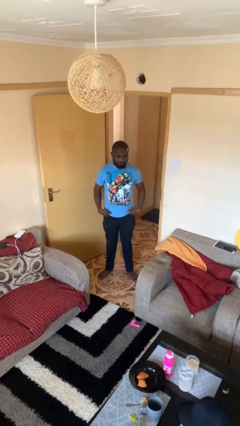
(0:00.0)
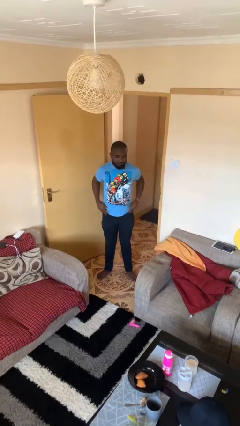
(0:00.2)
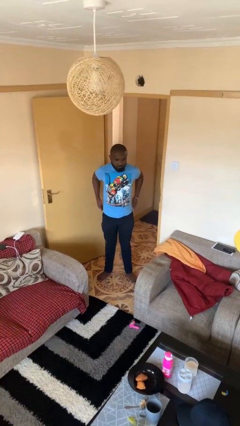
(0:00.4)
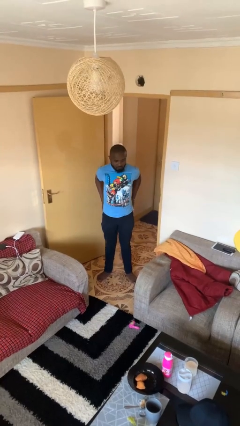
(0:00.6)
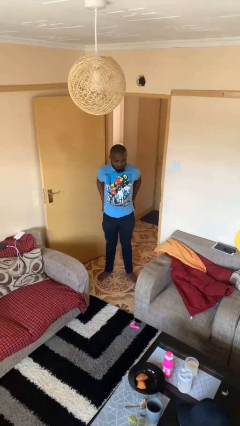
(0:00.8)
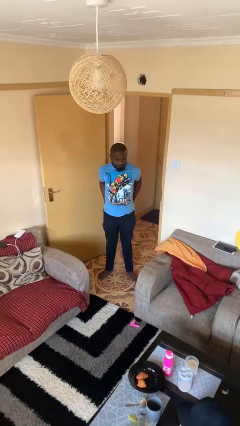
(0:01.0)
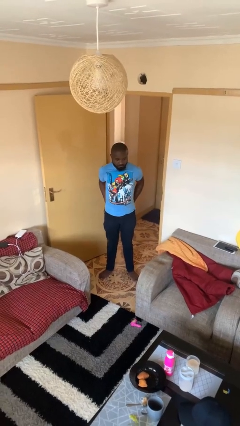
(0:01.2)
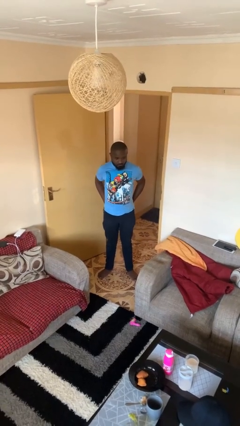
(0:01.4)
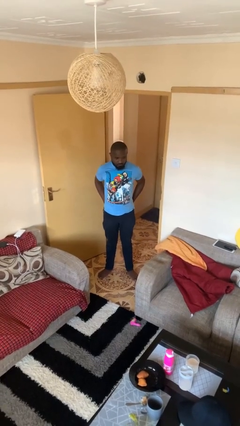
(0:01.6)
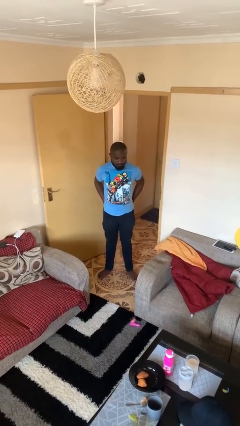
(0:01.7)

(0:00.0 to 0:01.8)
person puts hands in back pockets

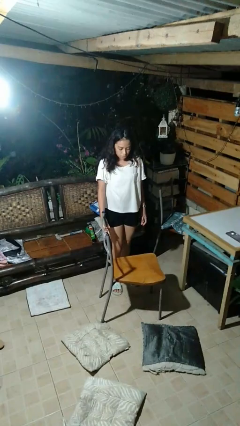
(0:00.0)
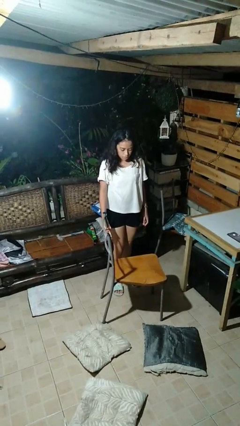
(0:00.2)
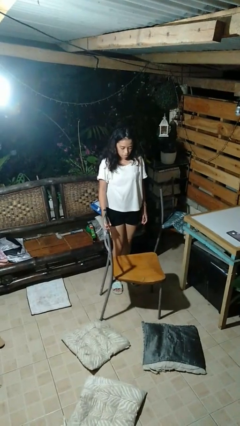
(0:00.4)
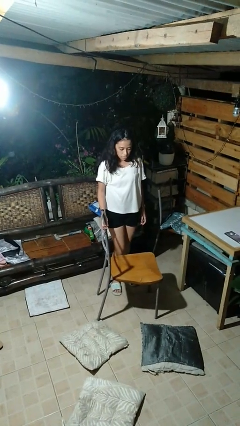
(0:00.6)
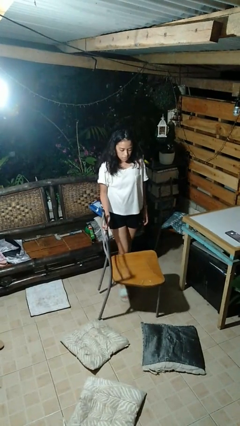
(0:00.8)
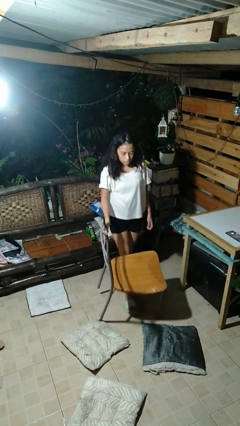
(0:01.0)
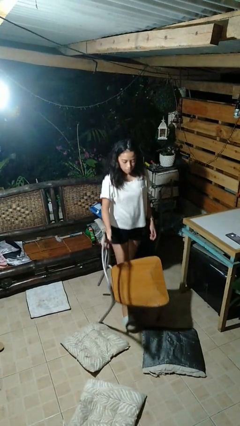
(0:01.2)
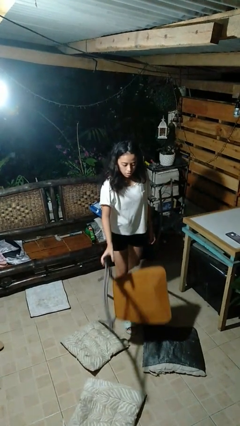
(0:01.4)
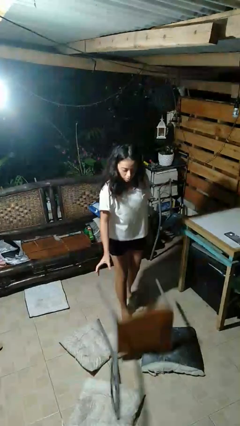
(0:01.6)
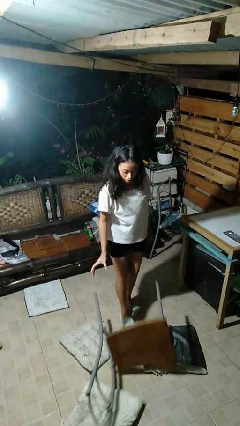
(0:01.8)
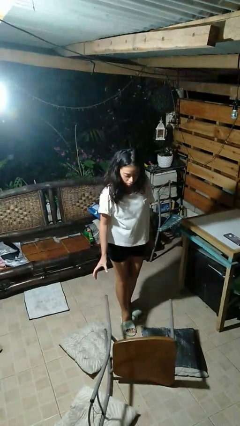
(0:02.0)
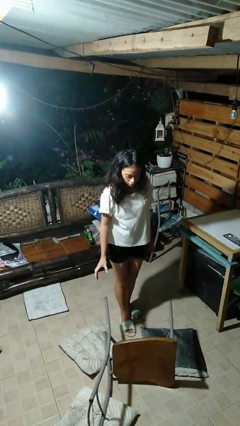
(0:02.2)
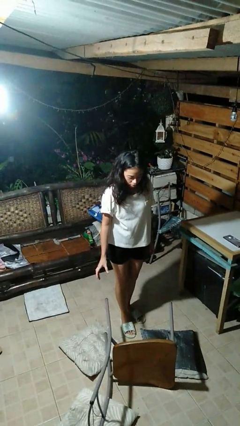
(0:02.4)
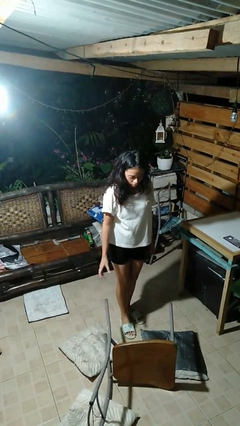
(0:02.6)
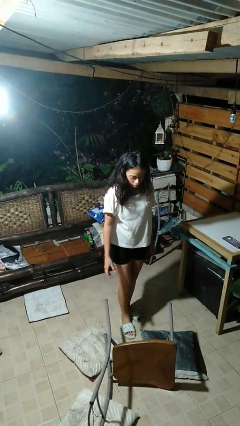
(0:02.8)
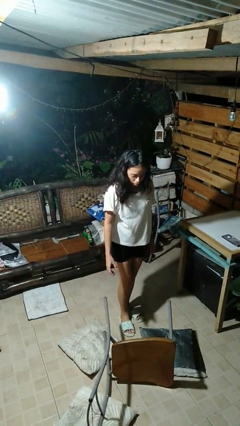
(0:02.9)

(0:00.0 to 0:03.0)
person knocks over furniture

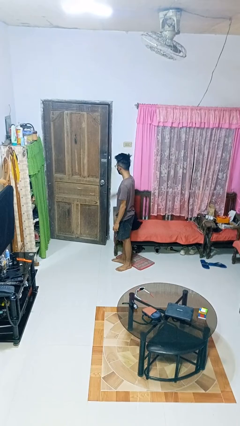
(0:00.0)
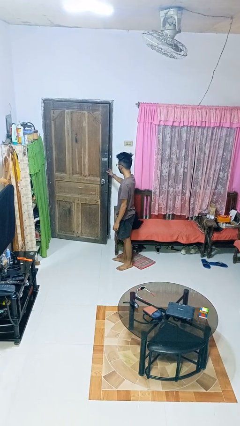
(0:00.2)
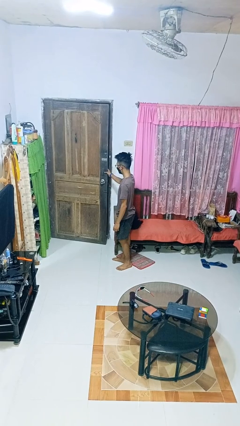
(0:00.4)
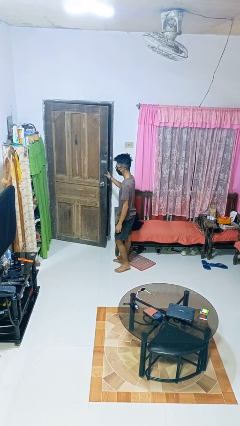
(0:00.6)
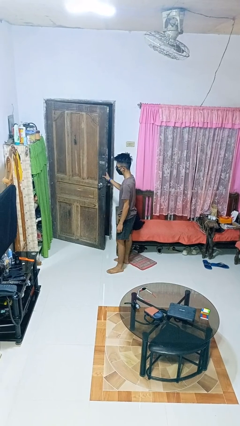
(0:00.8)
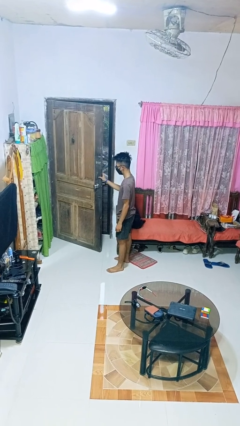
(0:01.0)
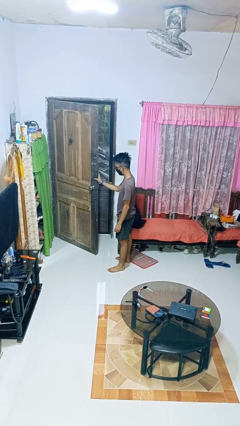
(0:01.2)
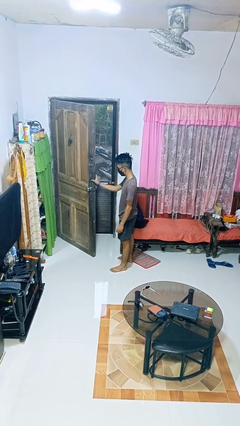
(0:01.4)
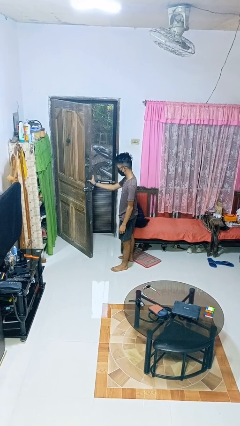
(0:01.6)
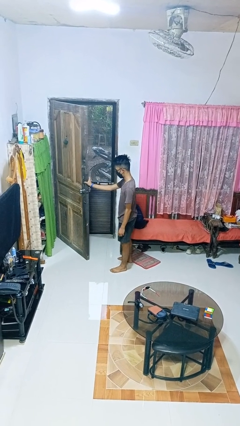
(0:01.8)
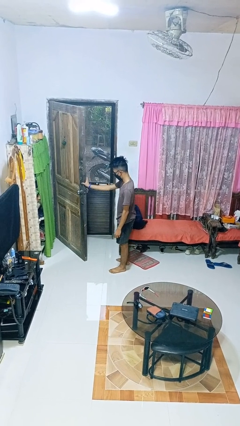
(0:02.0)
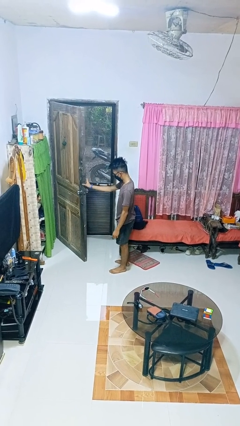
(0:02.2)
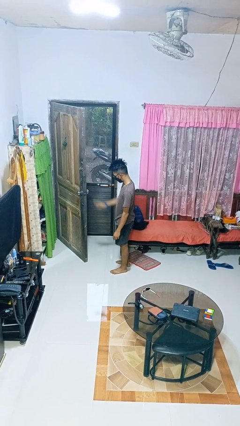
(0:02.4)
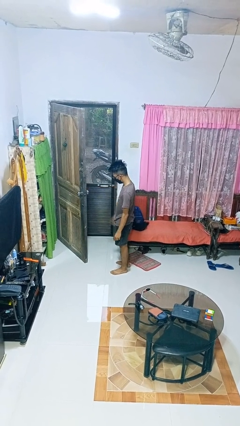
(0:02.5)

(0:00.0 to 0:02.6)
person opens facility door

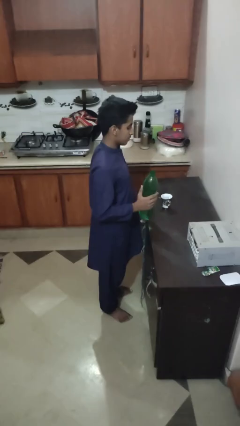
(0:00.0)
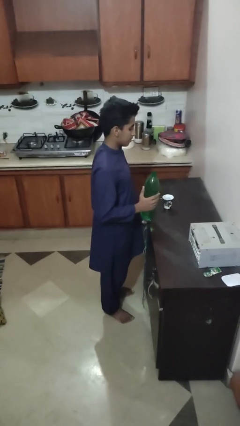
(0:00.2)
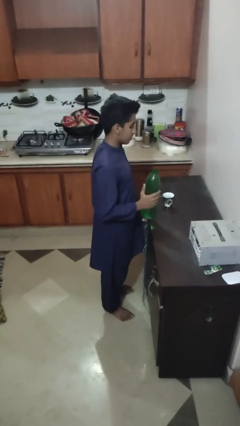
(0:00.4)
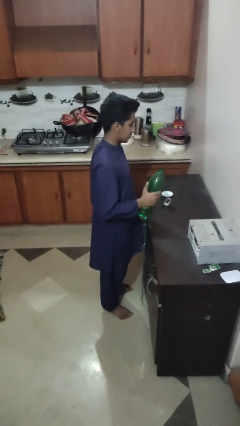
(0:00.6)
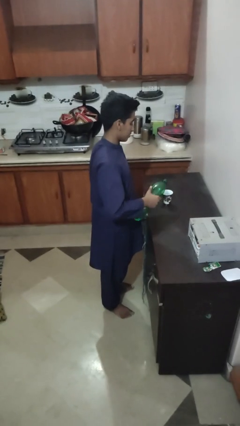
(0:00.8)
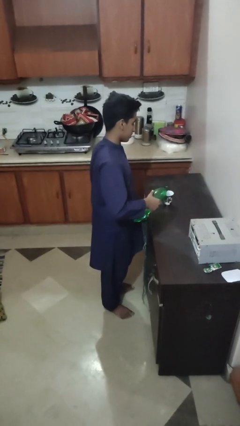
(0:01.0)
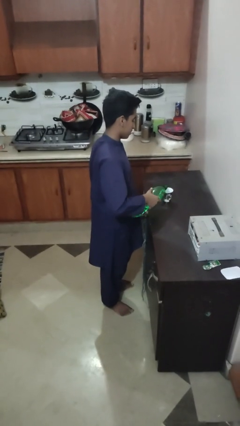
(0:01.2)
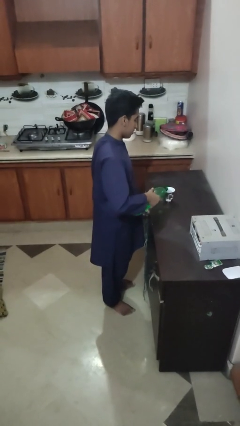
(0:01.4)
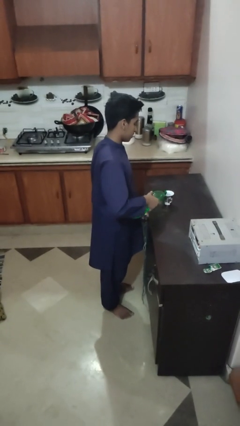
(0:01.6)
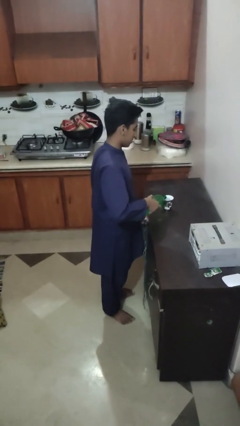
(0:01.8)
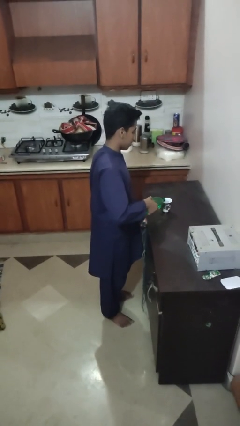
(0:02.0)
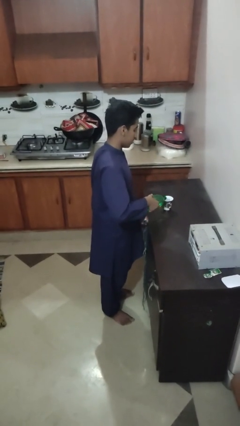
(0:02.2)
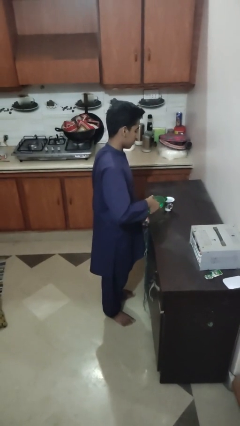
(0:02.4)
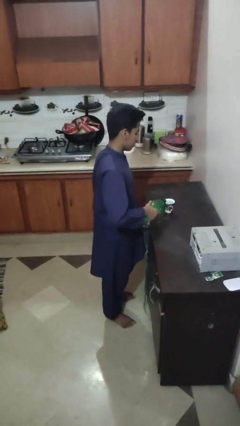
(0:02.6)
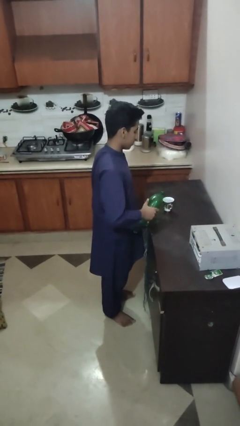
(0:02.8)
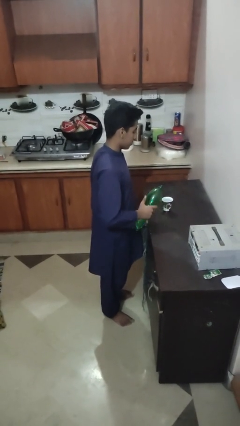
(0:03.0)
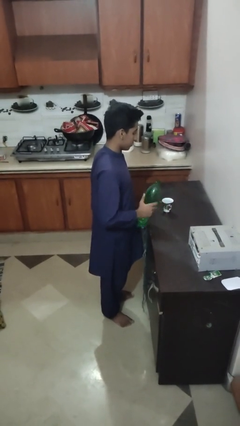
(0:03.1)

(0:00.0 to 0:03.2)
person pours liquid into cup

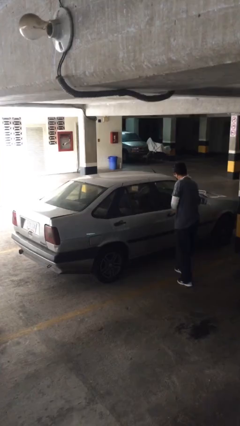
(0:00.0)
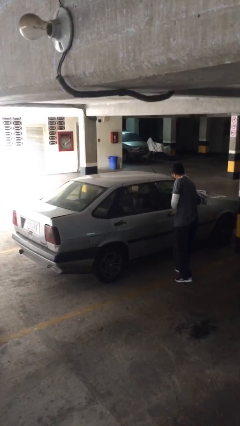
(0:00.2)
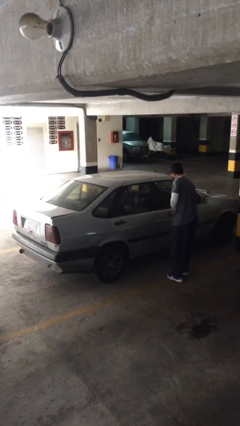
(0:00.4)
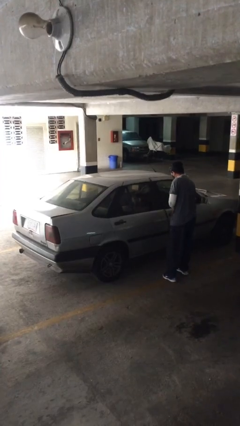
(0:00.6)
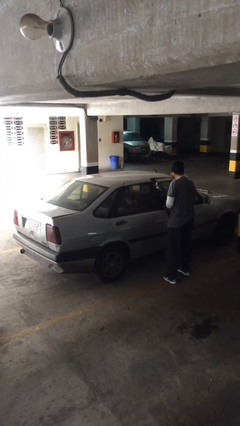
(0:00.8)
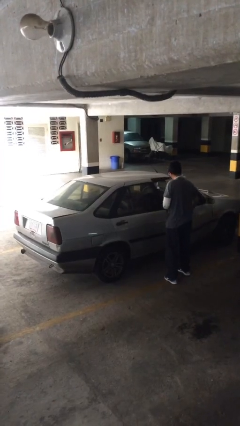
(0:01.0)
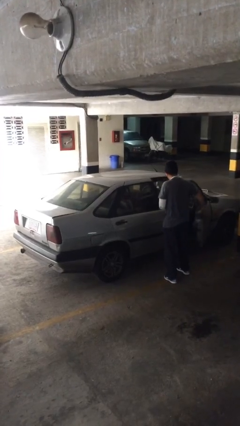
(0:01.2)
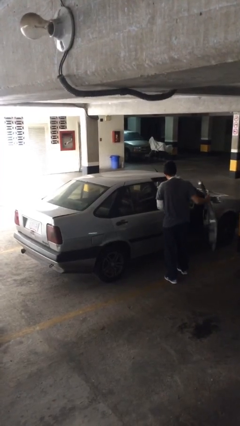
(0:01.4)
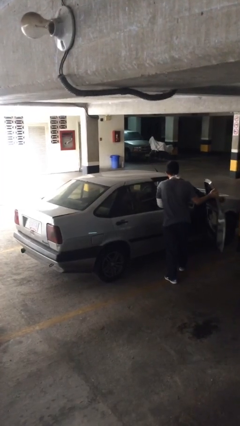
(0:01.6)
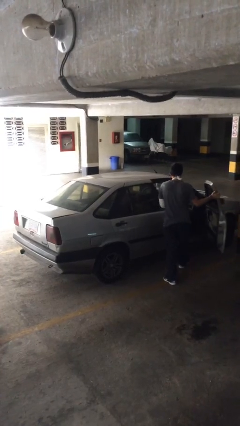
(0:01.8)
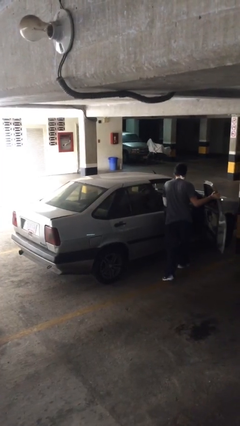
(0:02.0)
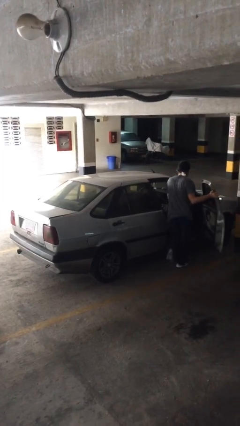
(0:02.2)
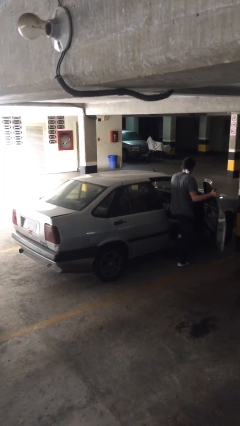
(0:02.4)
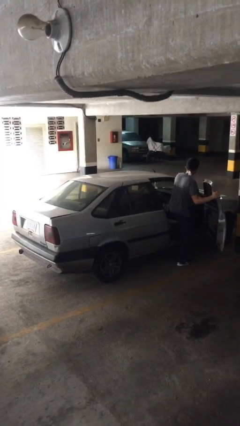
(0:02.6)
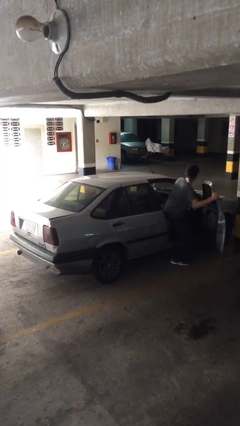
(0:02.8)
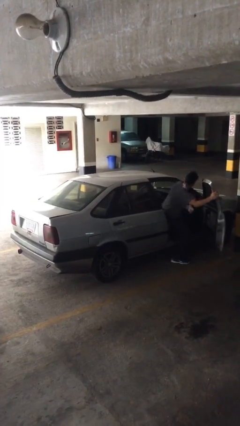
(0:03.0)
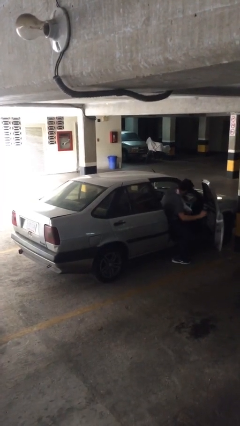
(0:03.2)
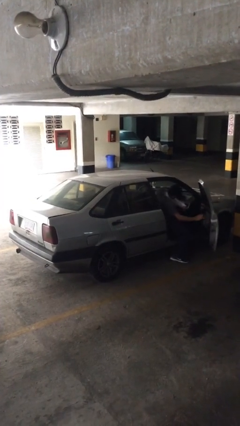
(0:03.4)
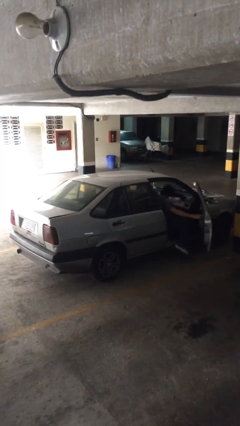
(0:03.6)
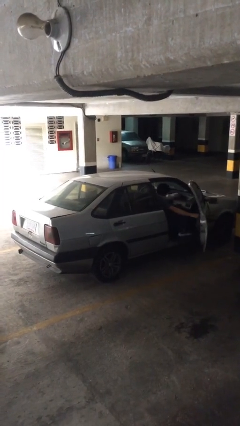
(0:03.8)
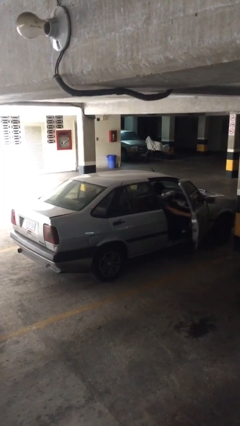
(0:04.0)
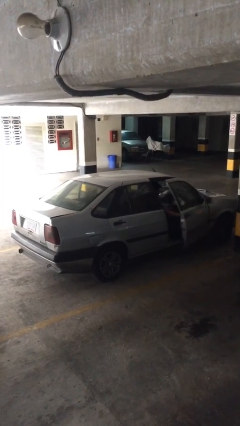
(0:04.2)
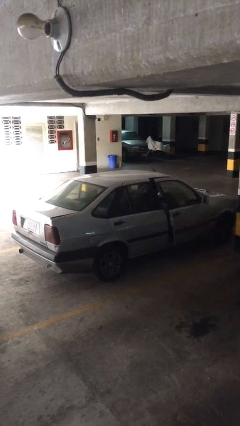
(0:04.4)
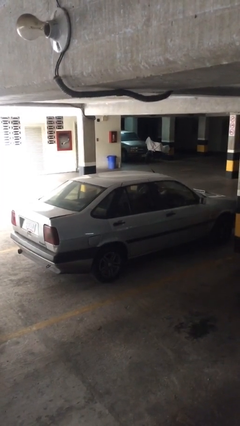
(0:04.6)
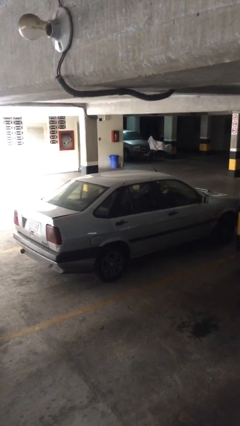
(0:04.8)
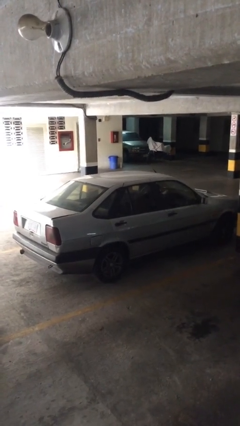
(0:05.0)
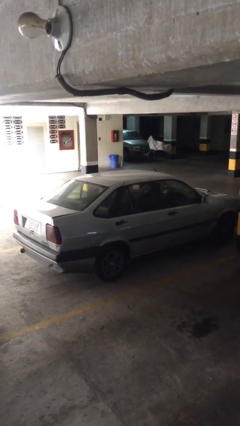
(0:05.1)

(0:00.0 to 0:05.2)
car picks up person

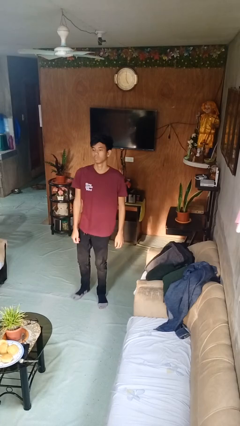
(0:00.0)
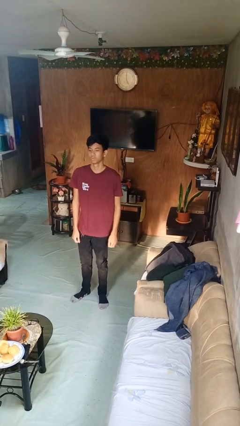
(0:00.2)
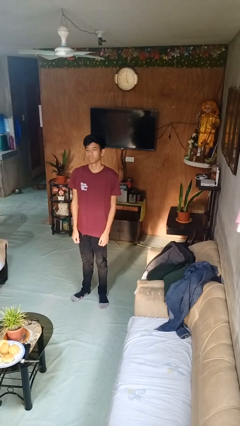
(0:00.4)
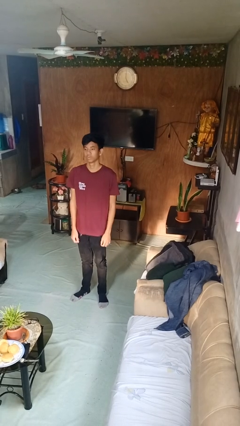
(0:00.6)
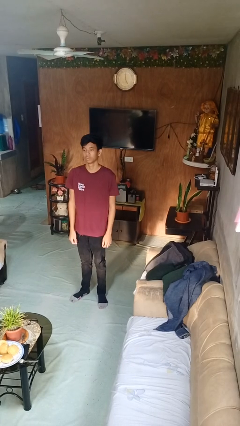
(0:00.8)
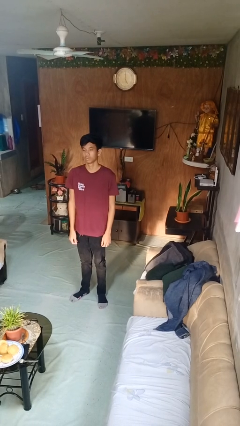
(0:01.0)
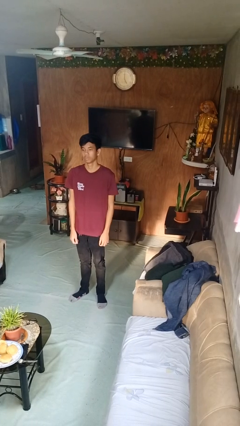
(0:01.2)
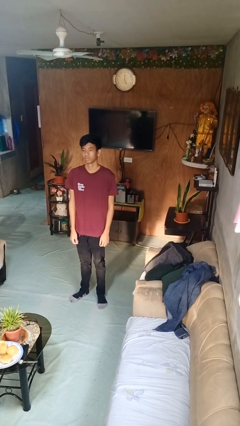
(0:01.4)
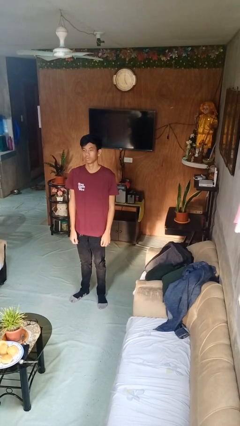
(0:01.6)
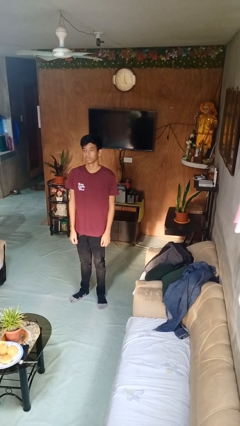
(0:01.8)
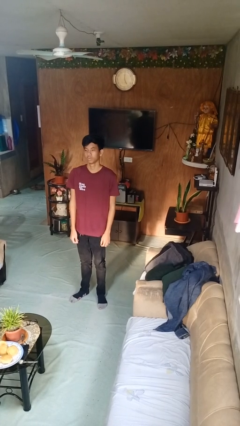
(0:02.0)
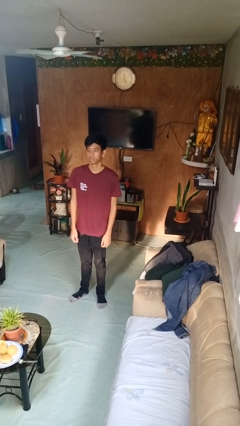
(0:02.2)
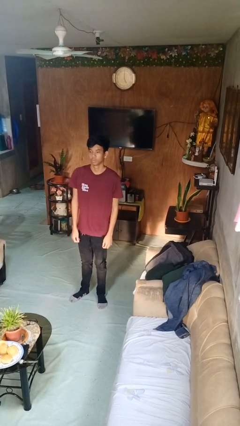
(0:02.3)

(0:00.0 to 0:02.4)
person stands up from floor
